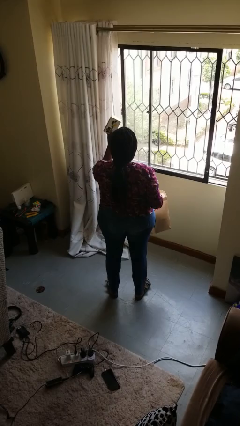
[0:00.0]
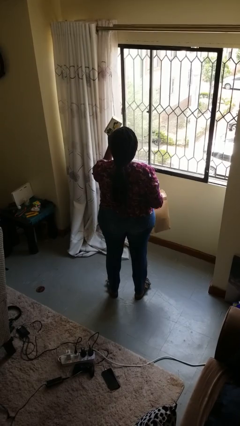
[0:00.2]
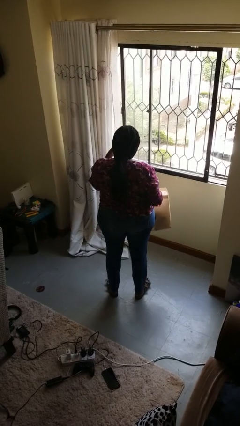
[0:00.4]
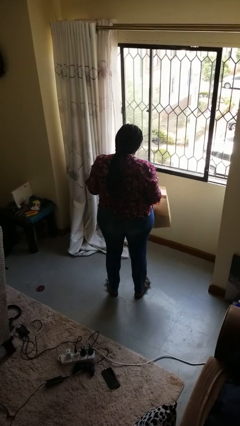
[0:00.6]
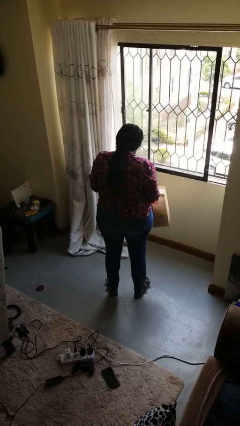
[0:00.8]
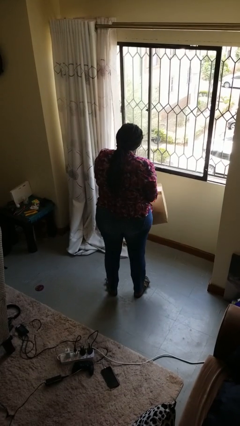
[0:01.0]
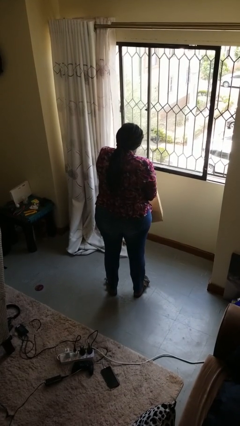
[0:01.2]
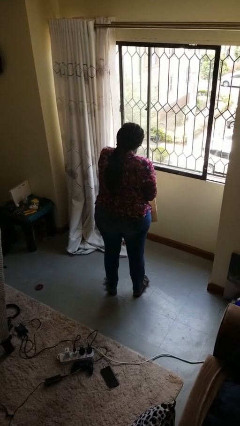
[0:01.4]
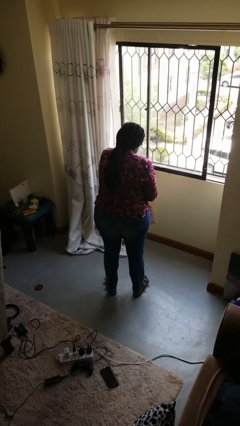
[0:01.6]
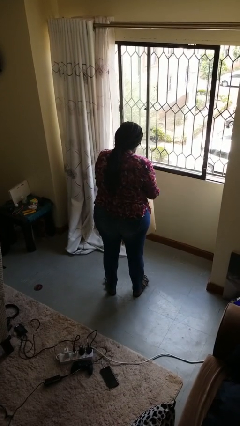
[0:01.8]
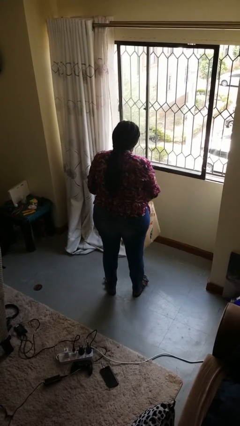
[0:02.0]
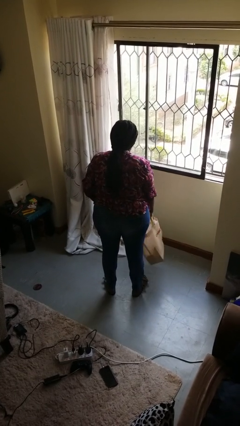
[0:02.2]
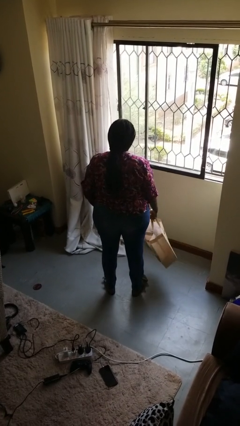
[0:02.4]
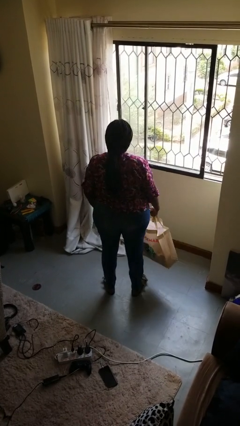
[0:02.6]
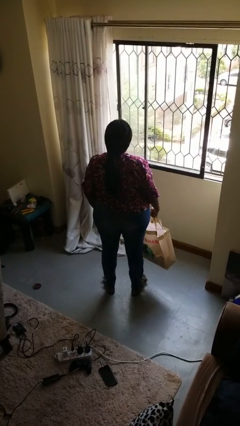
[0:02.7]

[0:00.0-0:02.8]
person puts object into bag

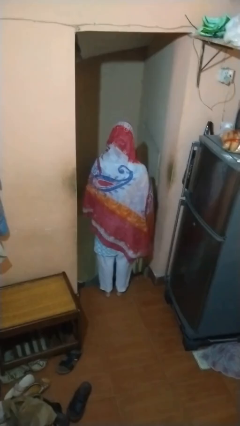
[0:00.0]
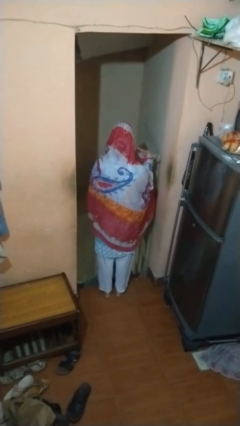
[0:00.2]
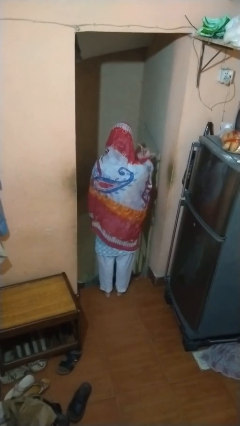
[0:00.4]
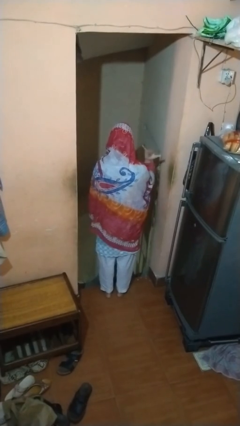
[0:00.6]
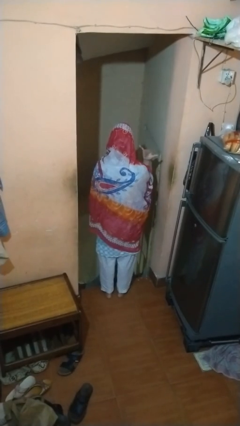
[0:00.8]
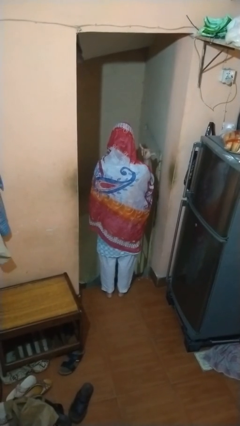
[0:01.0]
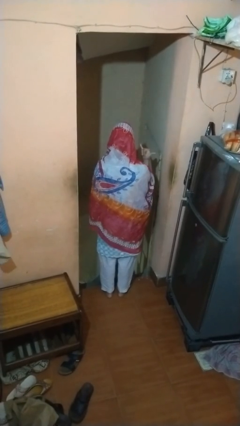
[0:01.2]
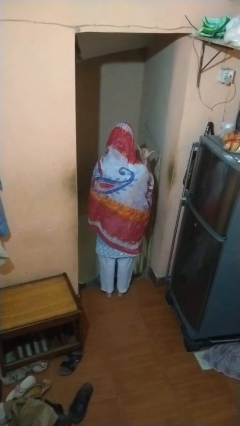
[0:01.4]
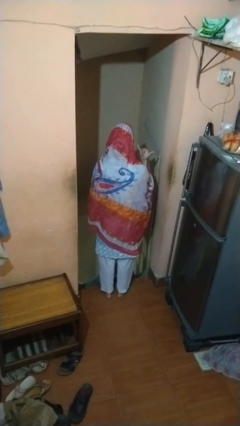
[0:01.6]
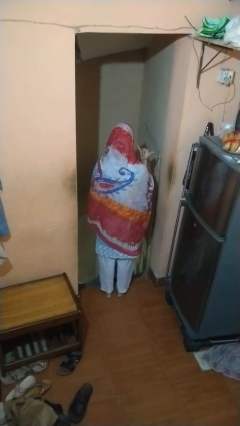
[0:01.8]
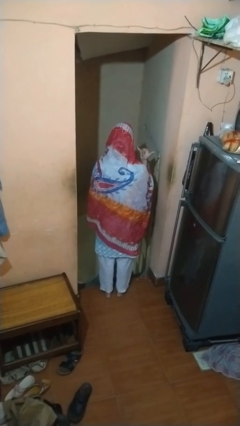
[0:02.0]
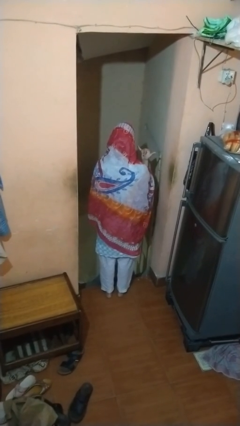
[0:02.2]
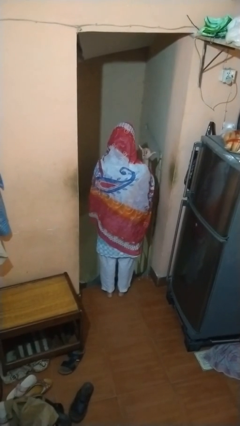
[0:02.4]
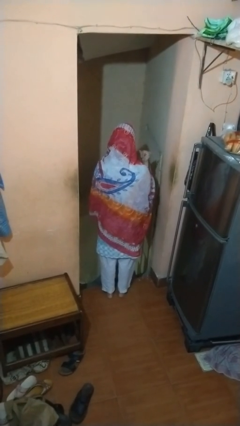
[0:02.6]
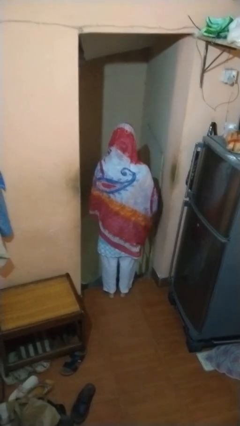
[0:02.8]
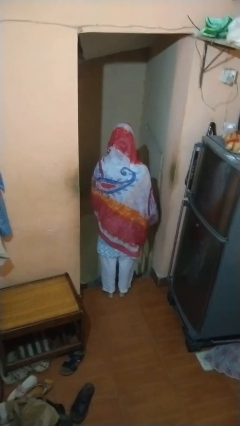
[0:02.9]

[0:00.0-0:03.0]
person gestures hang loose

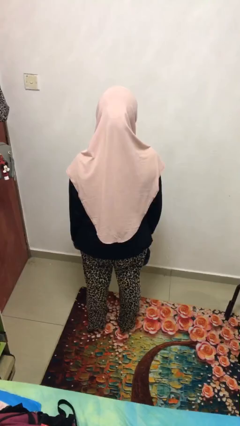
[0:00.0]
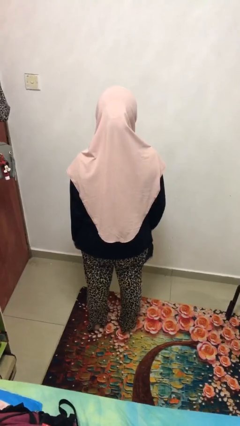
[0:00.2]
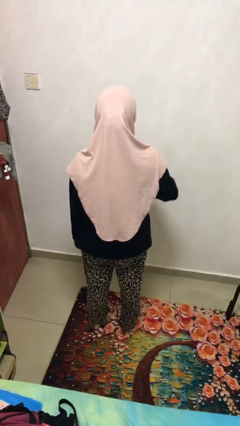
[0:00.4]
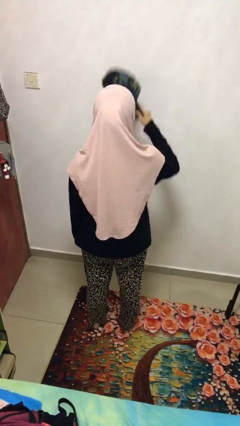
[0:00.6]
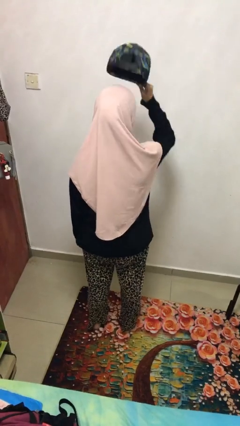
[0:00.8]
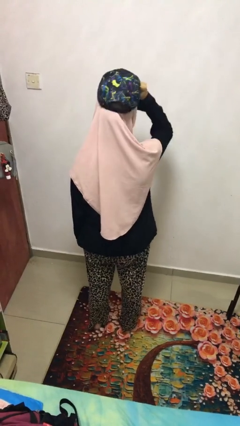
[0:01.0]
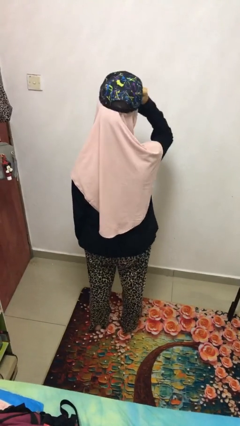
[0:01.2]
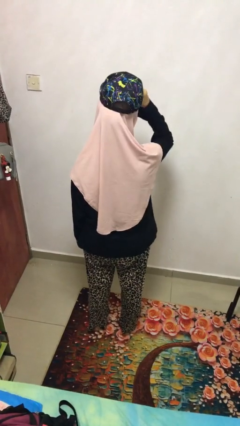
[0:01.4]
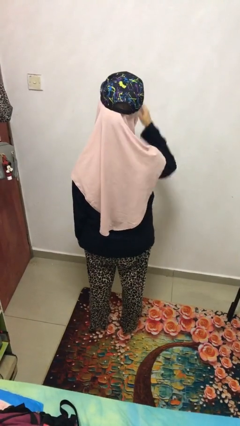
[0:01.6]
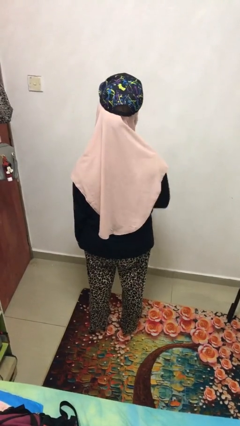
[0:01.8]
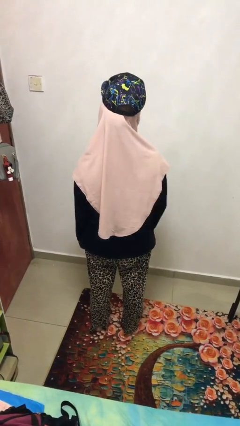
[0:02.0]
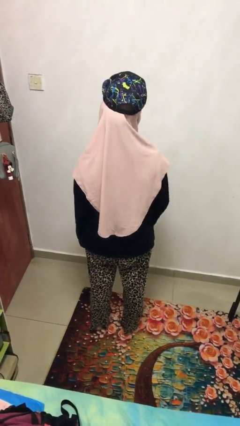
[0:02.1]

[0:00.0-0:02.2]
person puts on hat

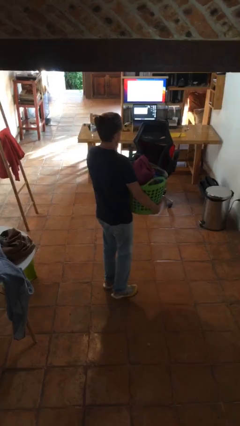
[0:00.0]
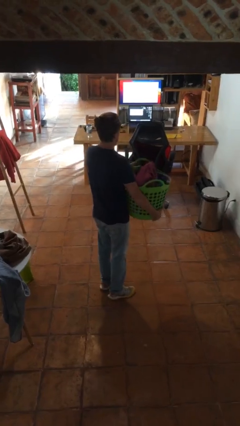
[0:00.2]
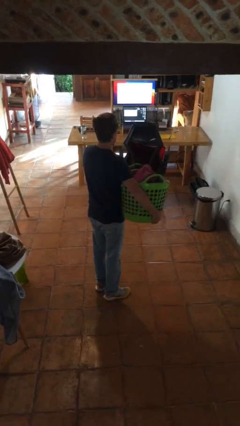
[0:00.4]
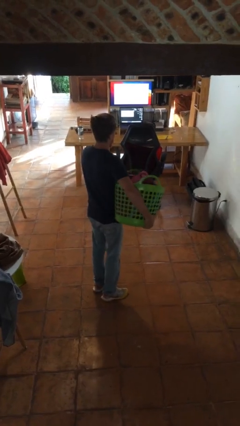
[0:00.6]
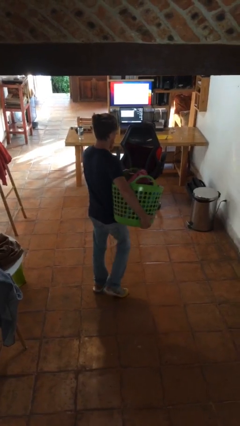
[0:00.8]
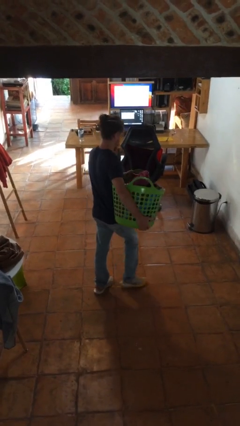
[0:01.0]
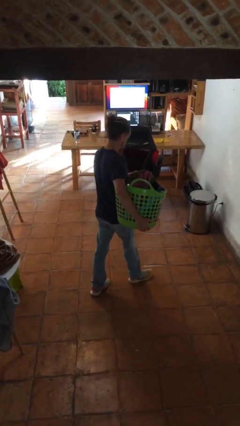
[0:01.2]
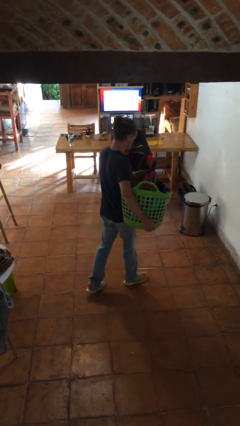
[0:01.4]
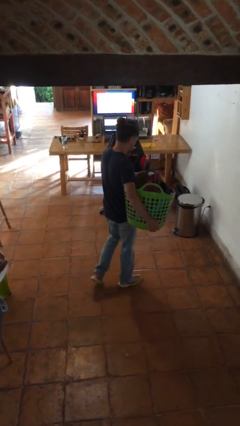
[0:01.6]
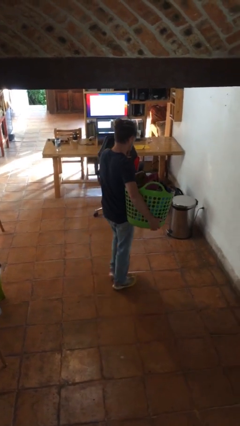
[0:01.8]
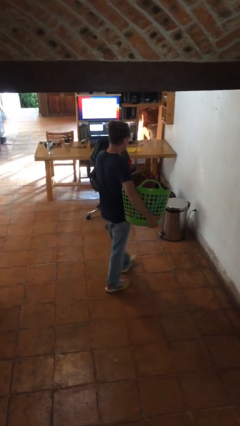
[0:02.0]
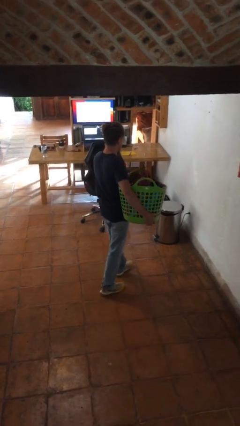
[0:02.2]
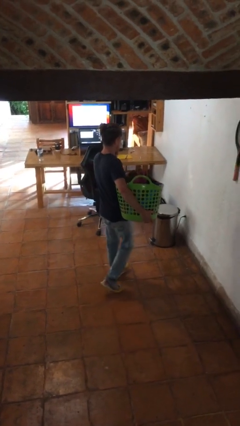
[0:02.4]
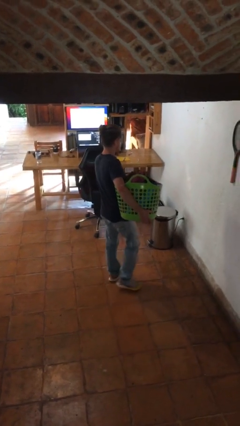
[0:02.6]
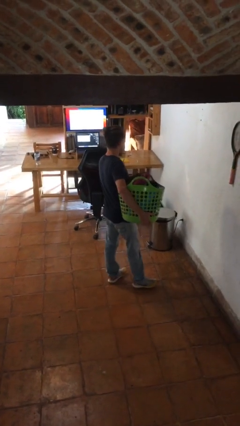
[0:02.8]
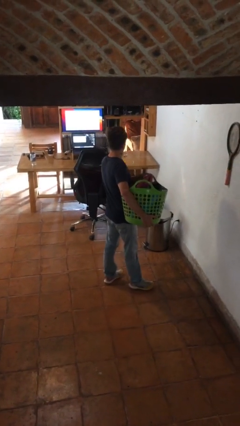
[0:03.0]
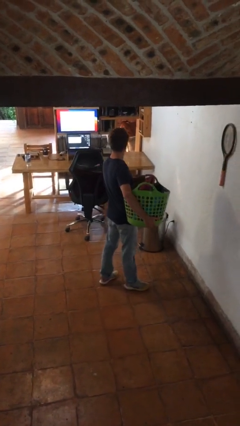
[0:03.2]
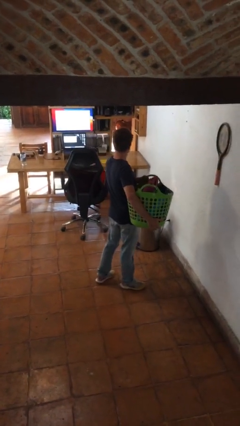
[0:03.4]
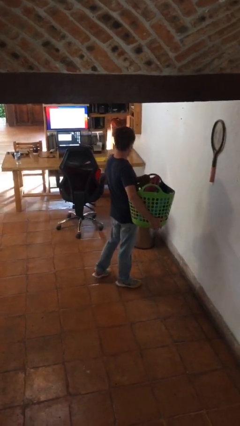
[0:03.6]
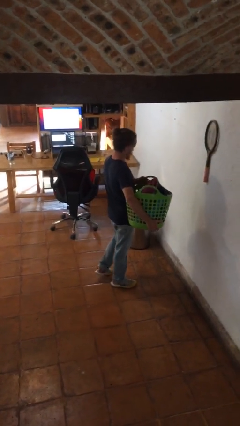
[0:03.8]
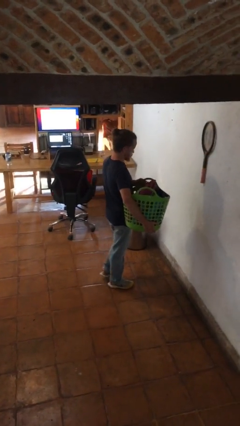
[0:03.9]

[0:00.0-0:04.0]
person carries laundry basket

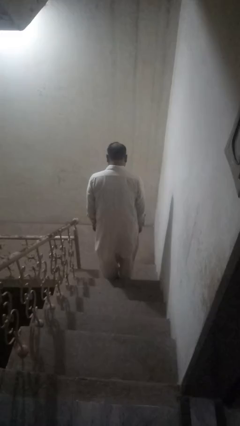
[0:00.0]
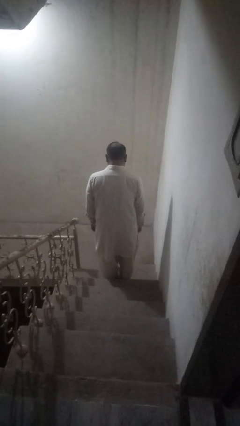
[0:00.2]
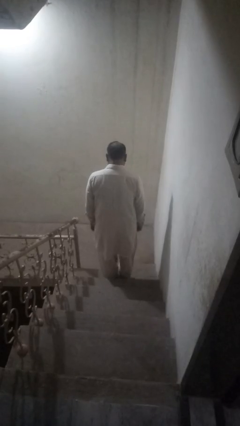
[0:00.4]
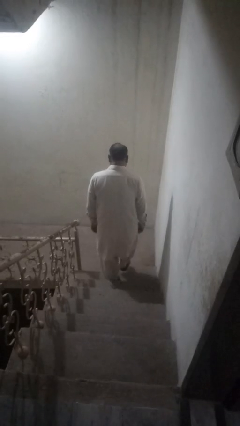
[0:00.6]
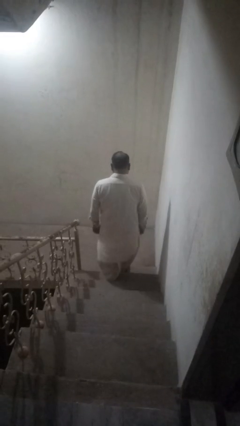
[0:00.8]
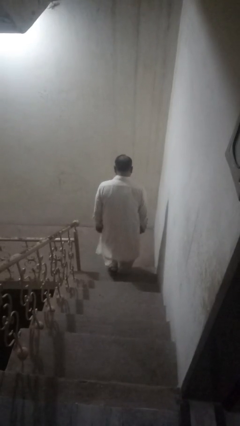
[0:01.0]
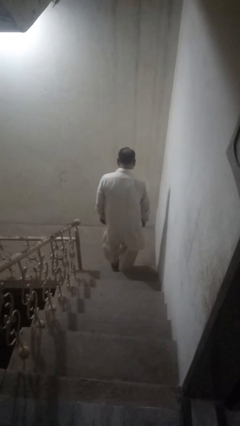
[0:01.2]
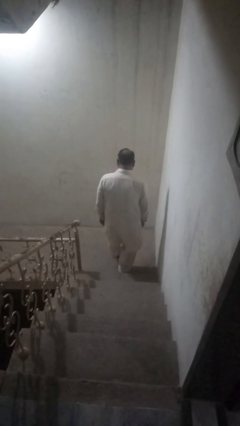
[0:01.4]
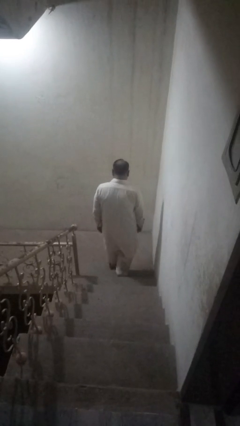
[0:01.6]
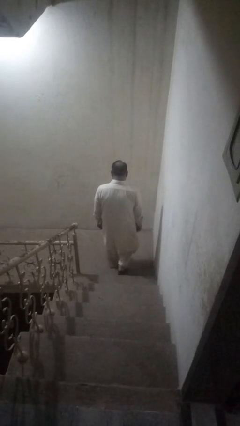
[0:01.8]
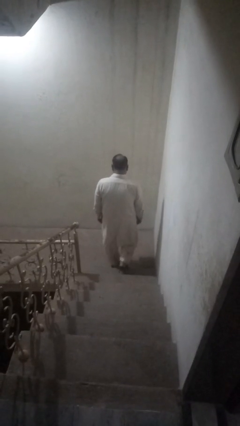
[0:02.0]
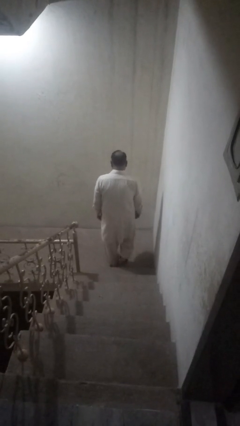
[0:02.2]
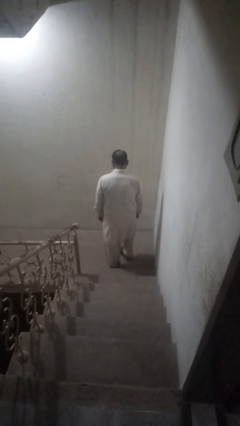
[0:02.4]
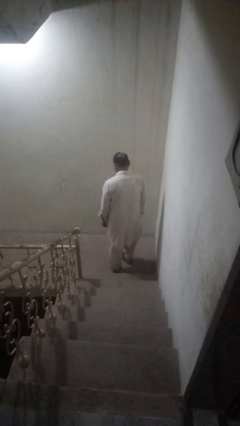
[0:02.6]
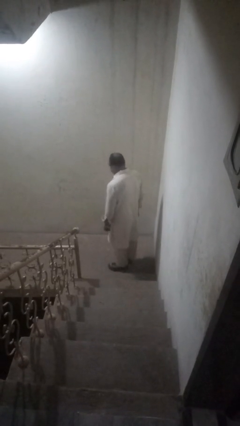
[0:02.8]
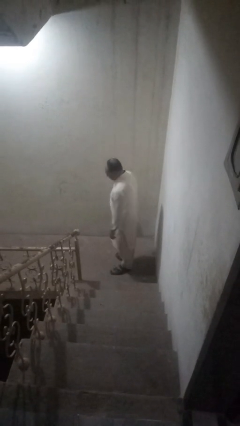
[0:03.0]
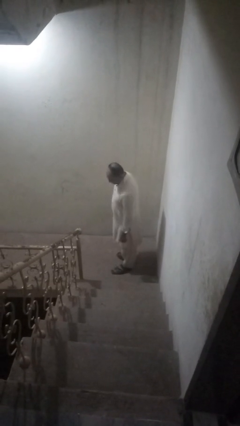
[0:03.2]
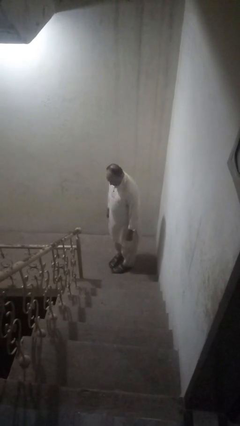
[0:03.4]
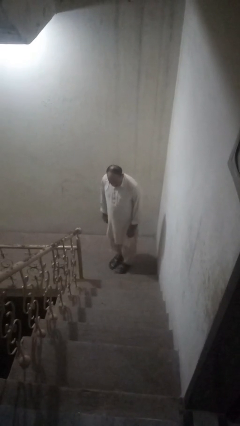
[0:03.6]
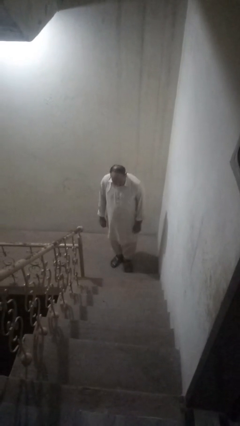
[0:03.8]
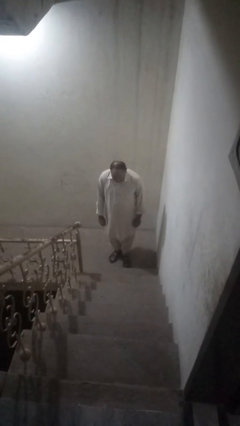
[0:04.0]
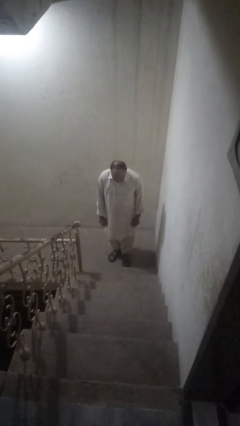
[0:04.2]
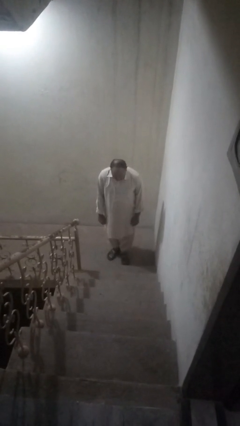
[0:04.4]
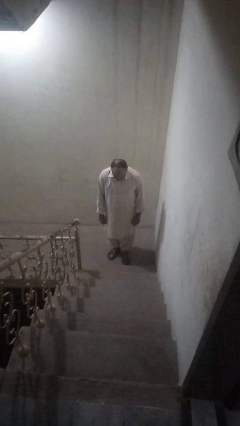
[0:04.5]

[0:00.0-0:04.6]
person climbs down stairs

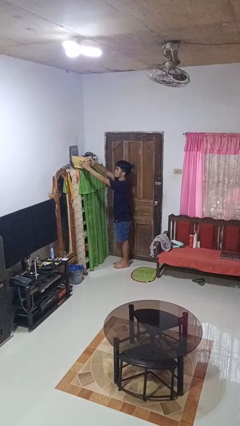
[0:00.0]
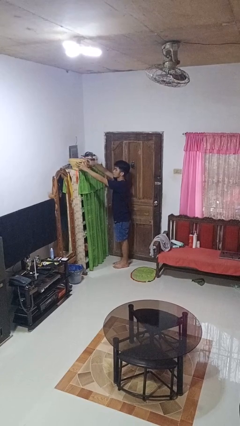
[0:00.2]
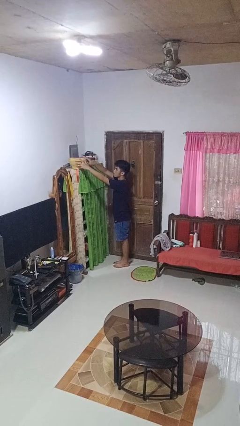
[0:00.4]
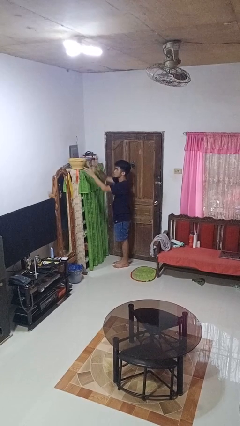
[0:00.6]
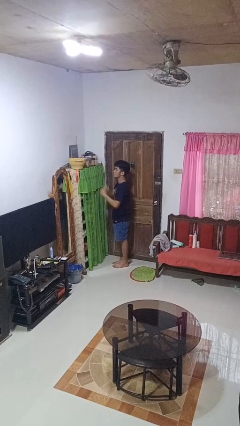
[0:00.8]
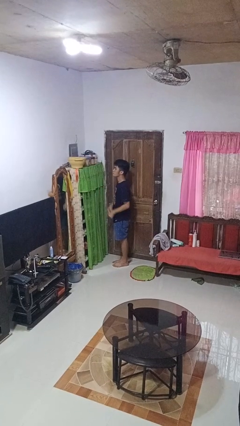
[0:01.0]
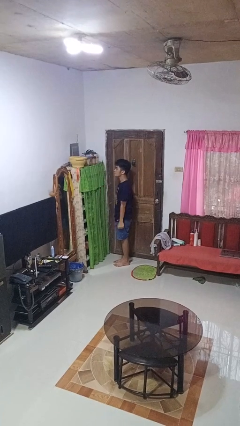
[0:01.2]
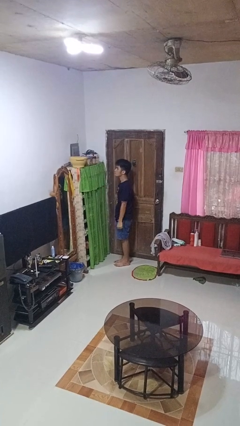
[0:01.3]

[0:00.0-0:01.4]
person puts down object on shelf
